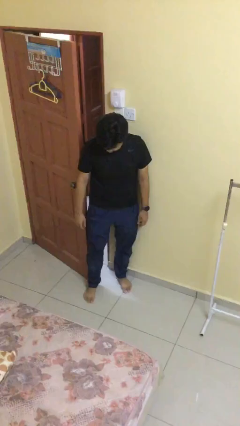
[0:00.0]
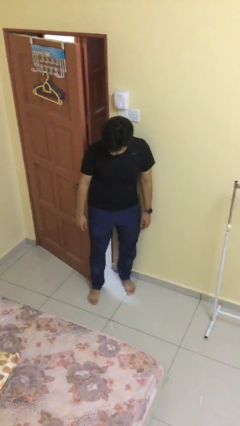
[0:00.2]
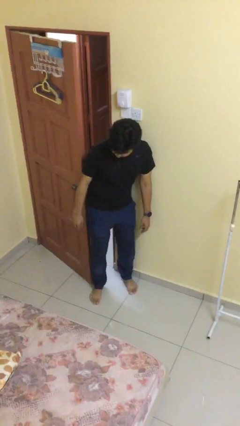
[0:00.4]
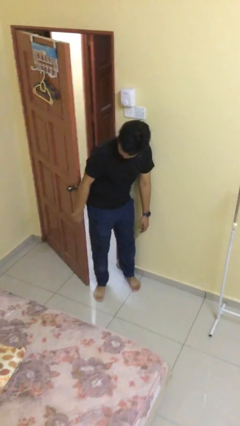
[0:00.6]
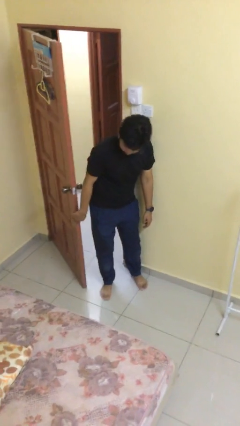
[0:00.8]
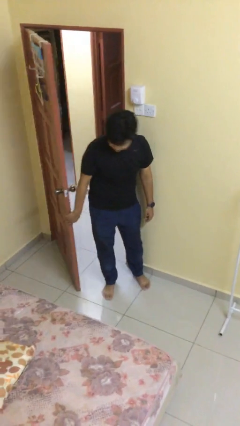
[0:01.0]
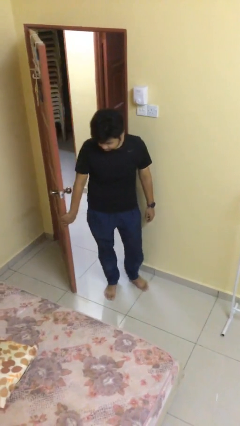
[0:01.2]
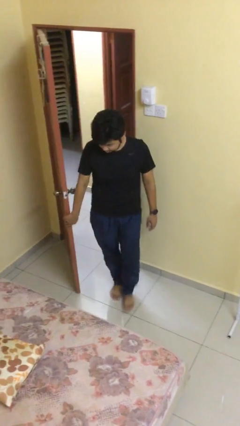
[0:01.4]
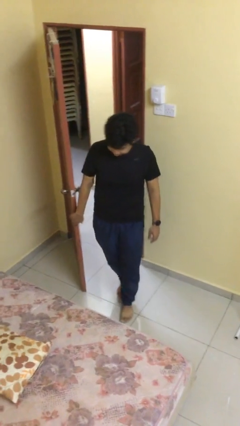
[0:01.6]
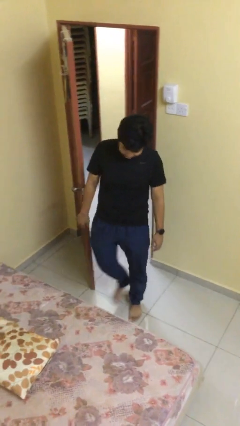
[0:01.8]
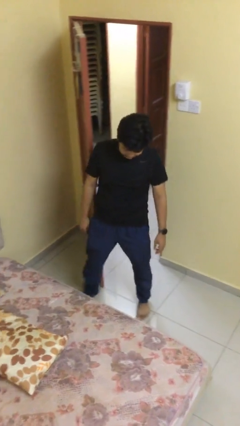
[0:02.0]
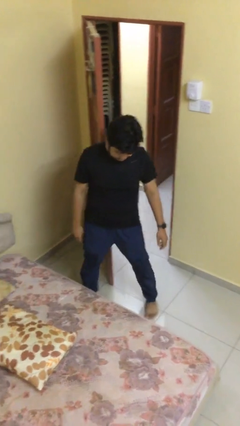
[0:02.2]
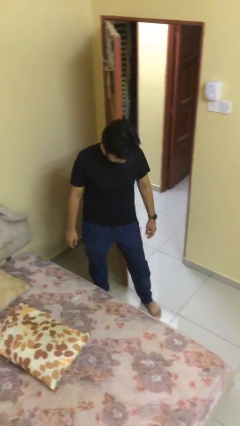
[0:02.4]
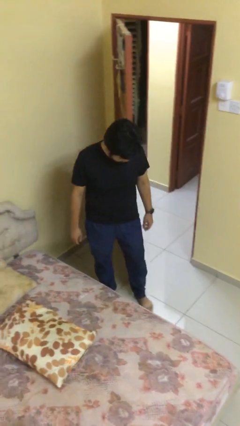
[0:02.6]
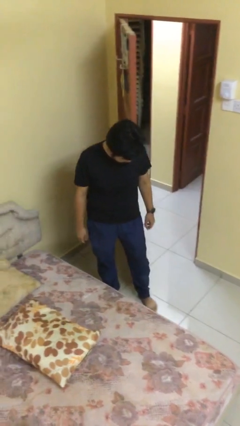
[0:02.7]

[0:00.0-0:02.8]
person opens facility door

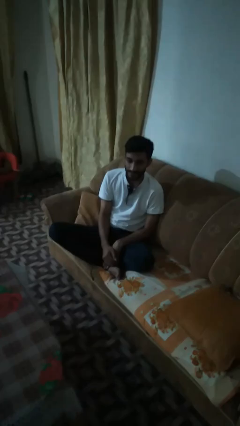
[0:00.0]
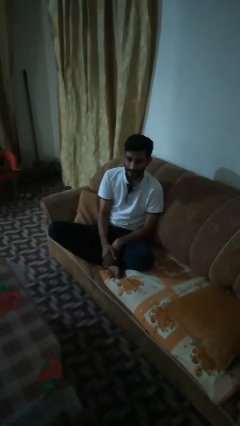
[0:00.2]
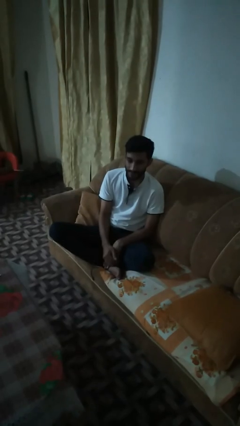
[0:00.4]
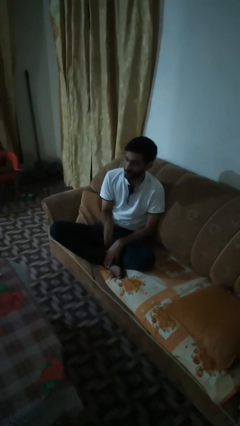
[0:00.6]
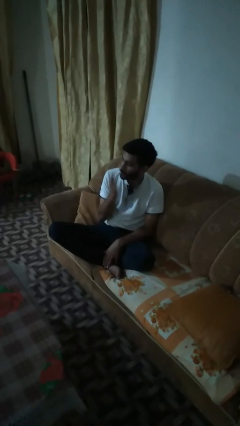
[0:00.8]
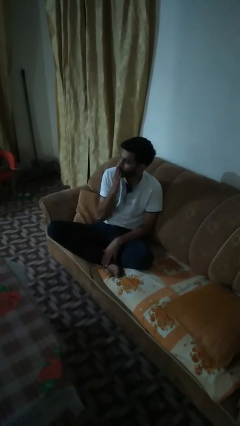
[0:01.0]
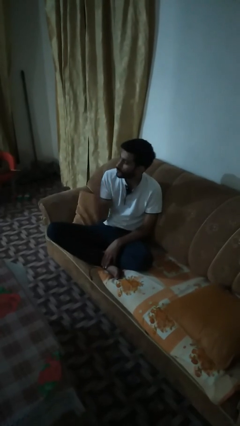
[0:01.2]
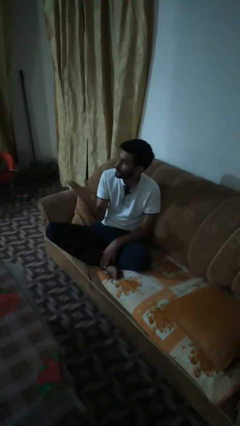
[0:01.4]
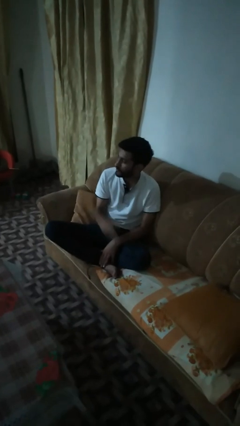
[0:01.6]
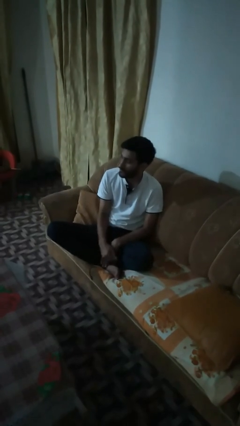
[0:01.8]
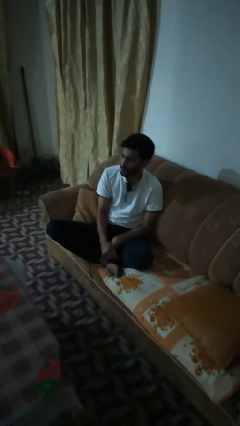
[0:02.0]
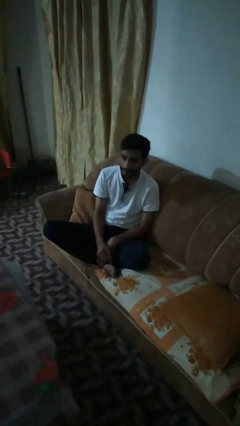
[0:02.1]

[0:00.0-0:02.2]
person gestures blow kiss

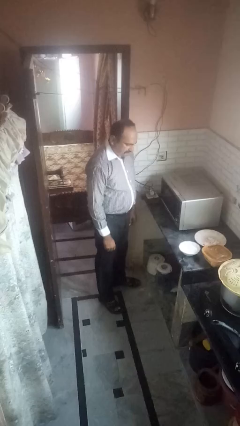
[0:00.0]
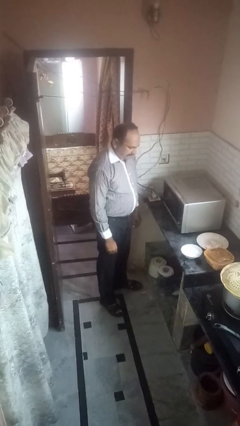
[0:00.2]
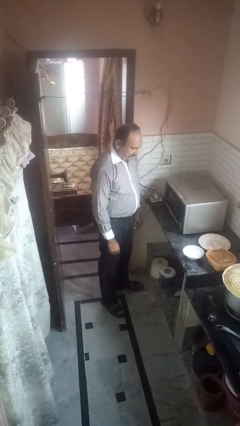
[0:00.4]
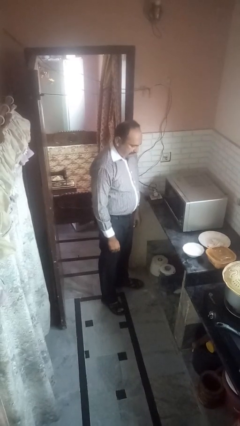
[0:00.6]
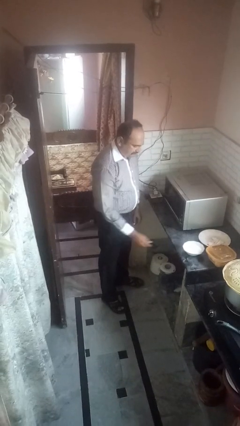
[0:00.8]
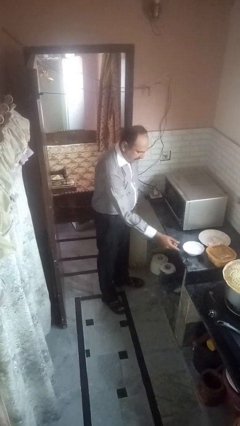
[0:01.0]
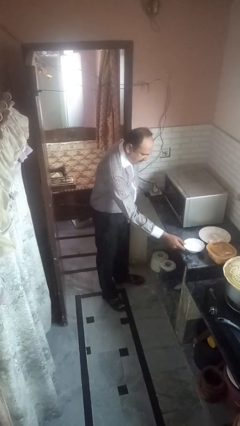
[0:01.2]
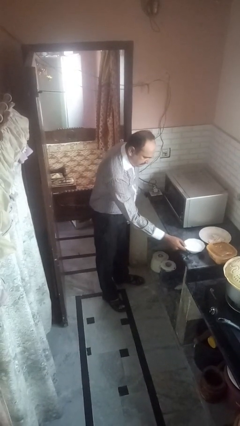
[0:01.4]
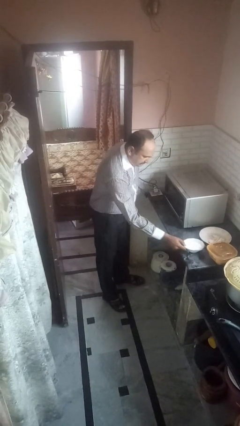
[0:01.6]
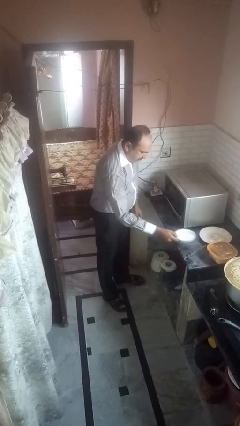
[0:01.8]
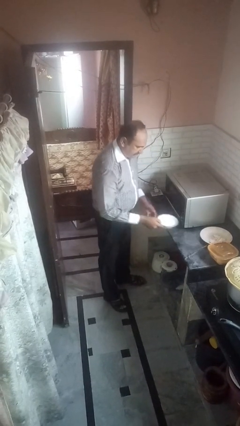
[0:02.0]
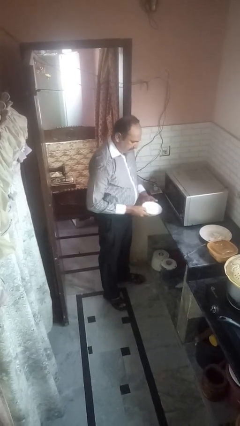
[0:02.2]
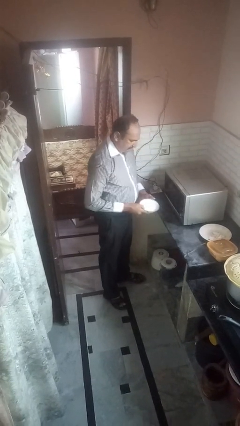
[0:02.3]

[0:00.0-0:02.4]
person takes object from microwave

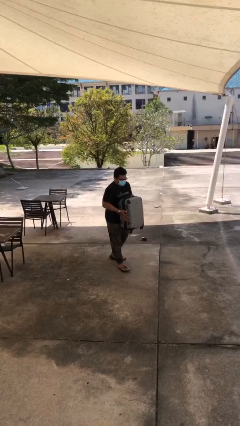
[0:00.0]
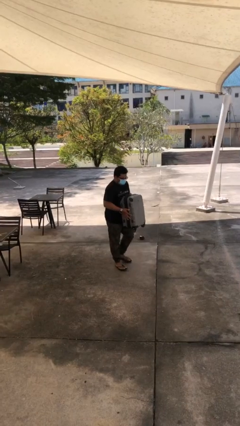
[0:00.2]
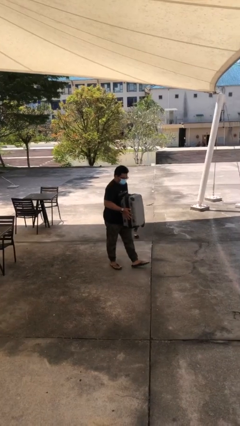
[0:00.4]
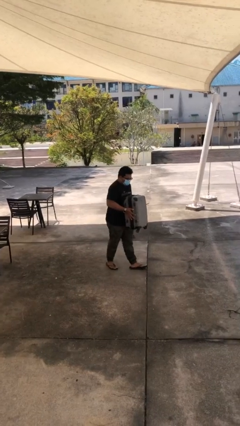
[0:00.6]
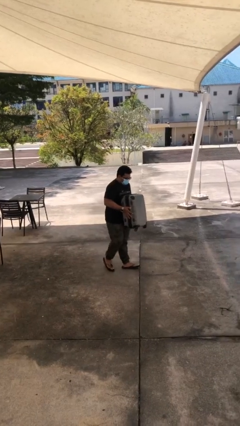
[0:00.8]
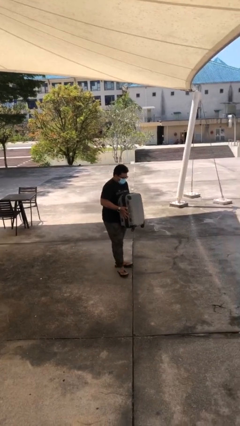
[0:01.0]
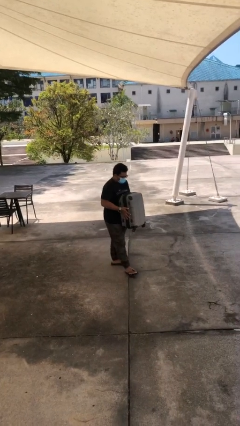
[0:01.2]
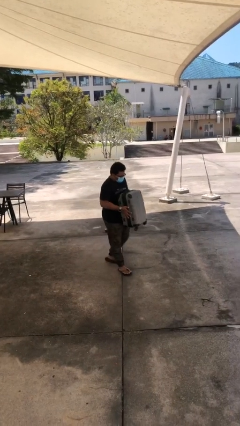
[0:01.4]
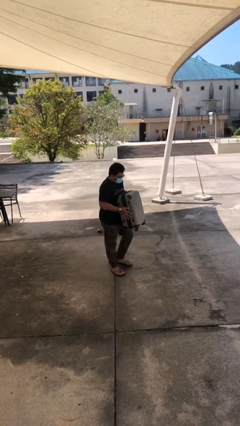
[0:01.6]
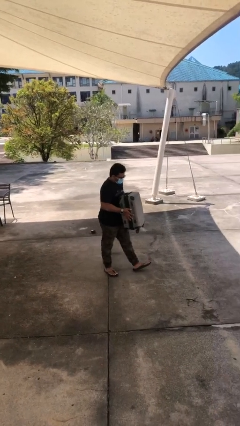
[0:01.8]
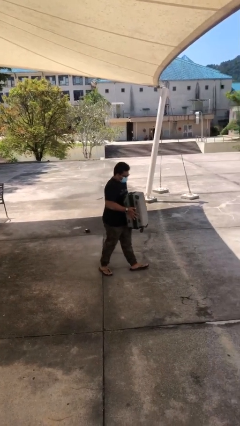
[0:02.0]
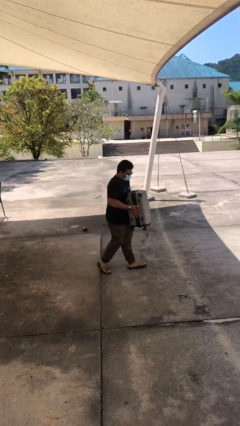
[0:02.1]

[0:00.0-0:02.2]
person carries heavy object

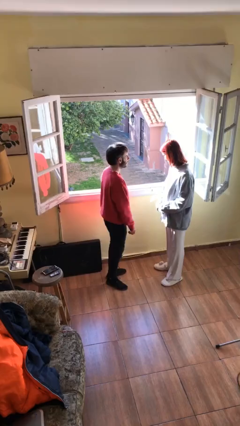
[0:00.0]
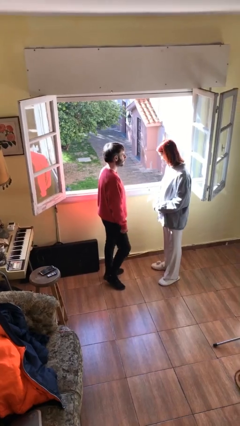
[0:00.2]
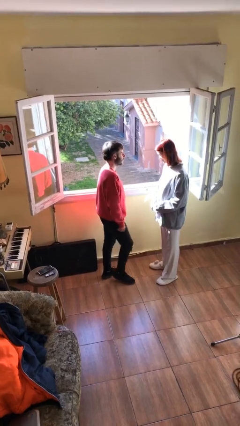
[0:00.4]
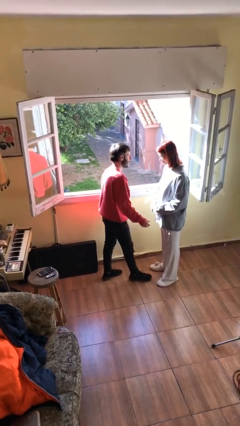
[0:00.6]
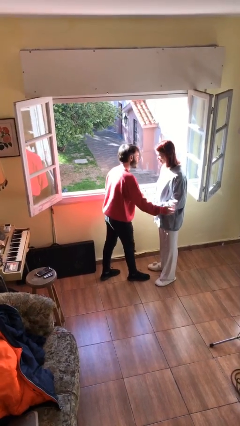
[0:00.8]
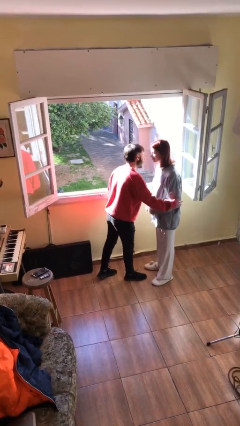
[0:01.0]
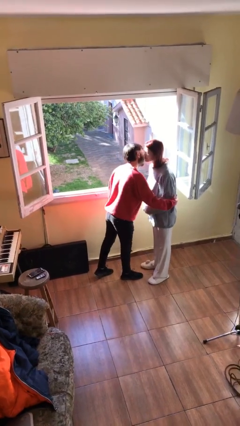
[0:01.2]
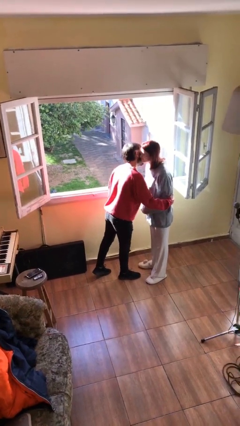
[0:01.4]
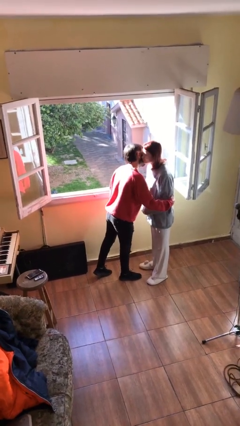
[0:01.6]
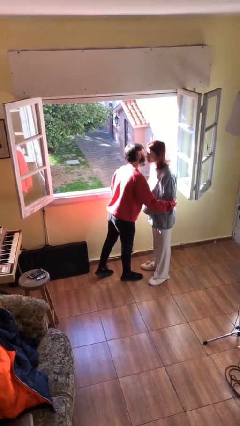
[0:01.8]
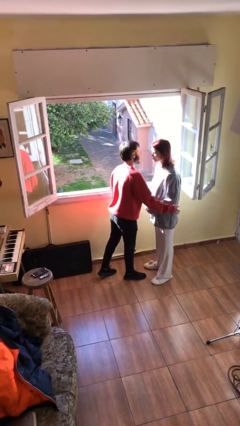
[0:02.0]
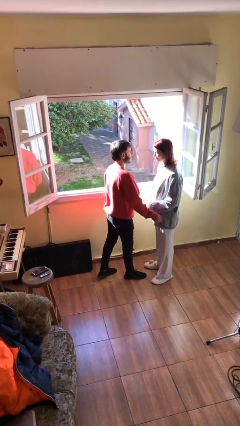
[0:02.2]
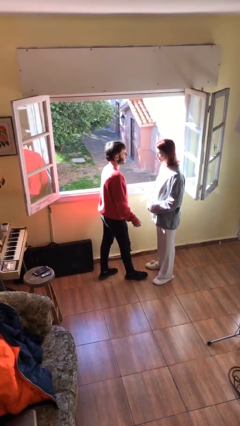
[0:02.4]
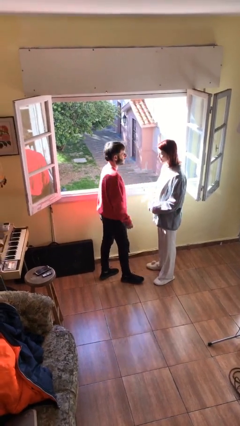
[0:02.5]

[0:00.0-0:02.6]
person kisses cheek of person

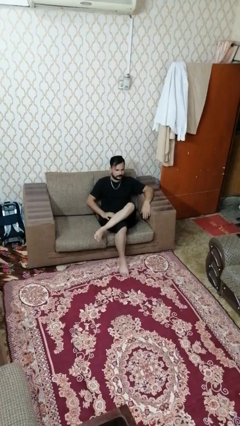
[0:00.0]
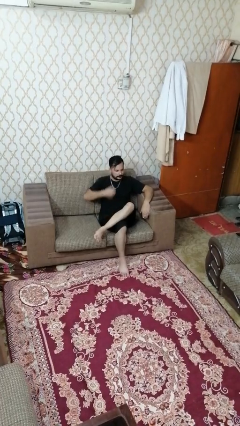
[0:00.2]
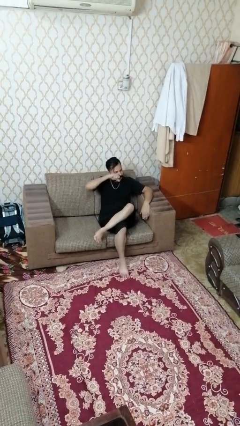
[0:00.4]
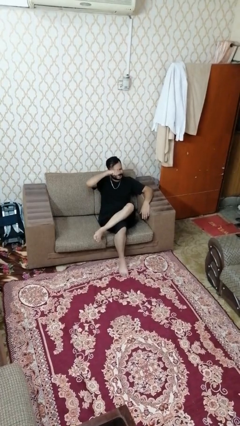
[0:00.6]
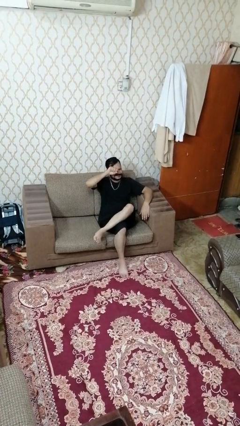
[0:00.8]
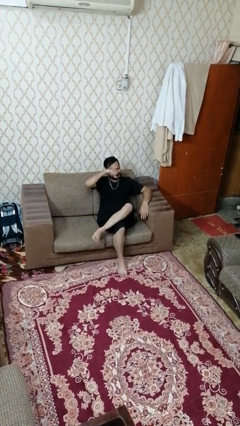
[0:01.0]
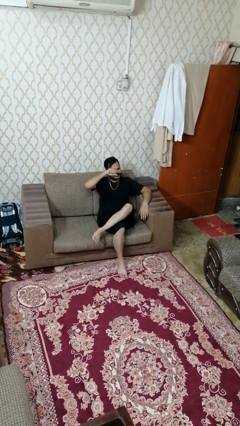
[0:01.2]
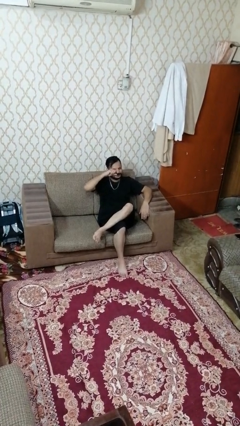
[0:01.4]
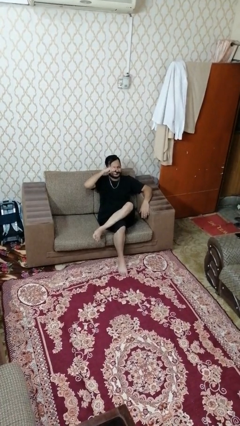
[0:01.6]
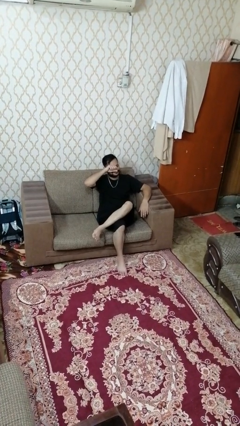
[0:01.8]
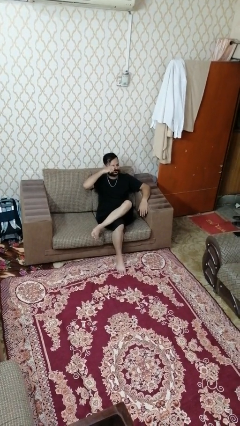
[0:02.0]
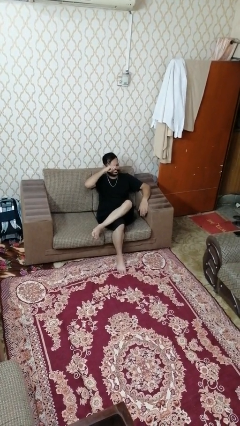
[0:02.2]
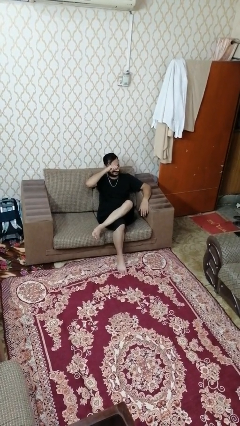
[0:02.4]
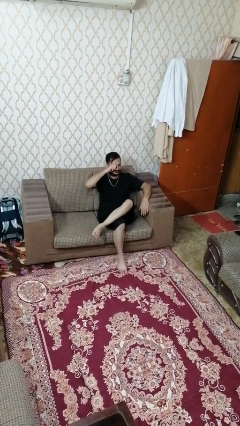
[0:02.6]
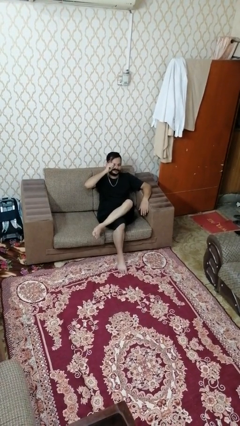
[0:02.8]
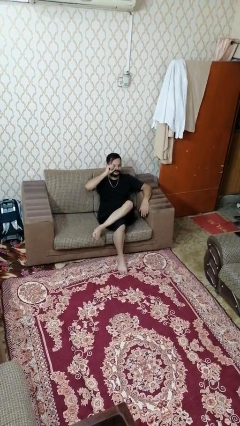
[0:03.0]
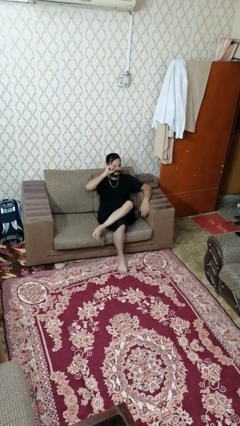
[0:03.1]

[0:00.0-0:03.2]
person rubs eyes

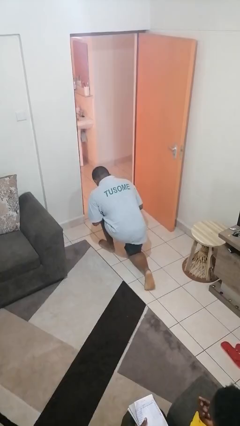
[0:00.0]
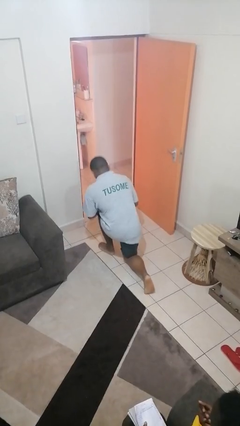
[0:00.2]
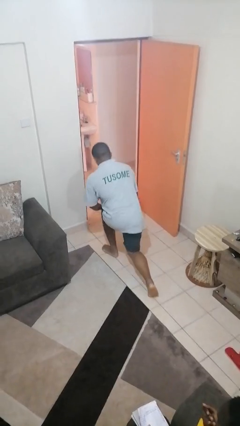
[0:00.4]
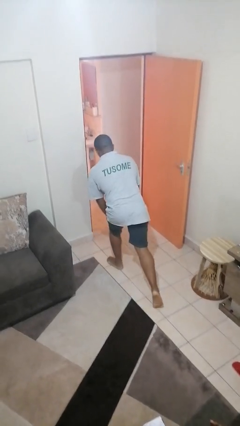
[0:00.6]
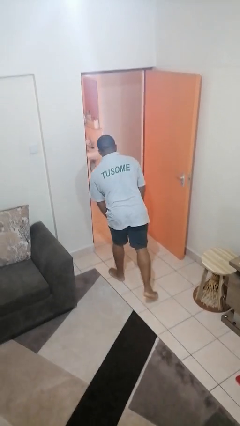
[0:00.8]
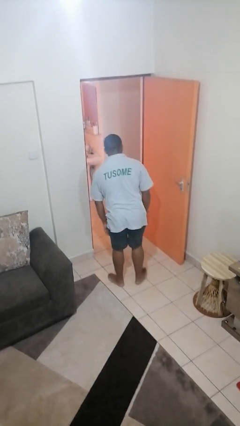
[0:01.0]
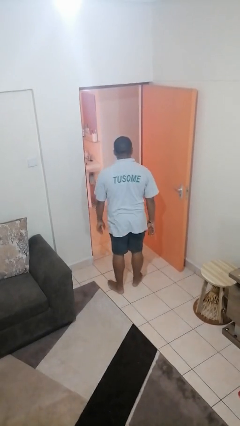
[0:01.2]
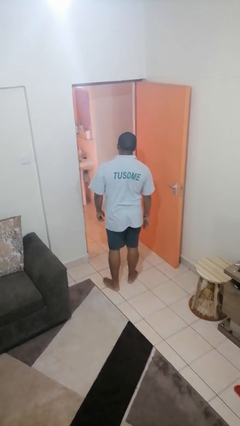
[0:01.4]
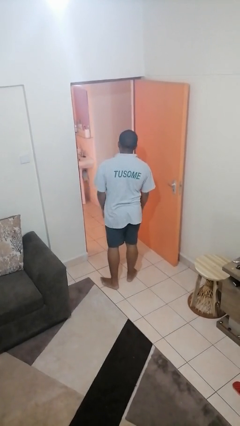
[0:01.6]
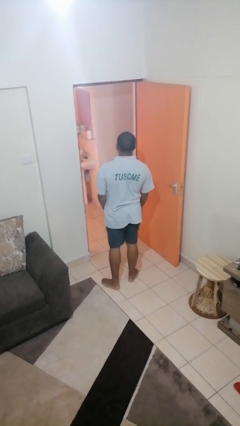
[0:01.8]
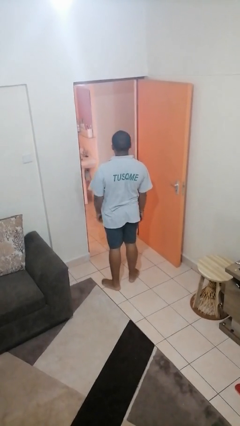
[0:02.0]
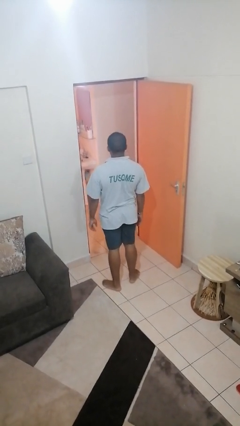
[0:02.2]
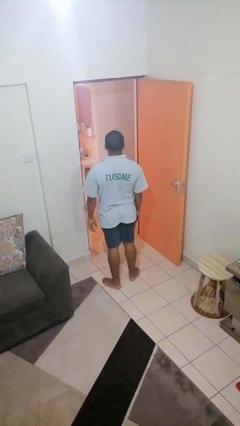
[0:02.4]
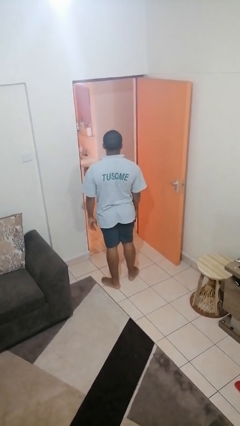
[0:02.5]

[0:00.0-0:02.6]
person stands up from floor
